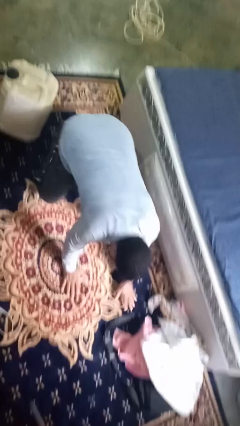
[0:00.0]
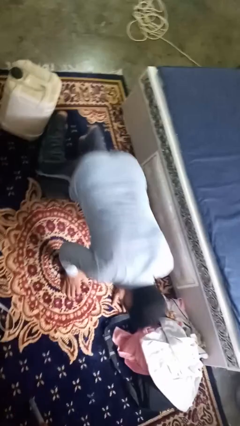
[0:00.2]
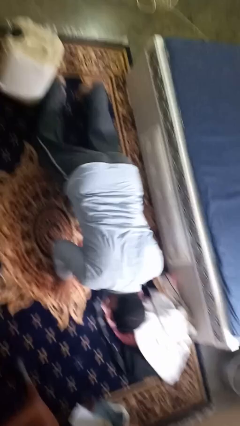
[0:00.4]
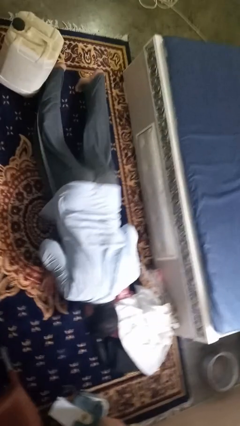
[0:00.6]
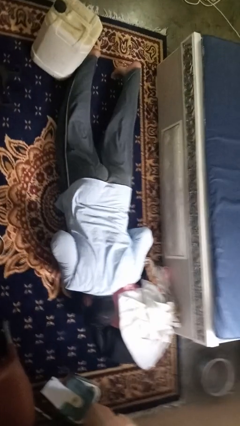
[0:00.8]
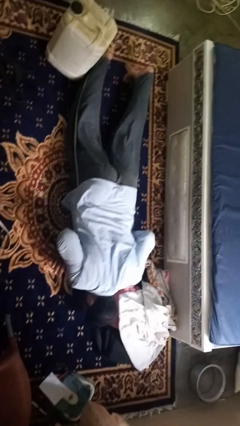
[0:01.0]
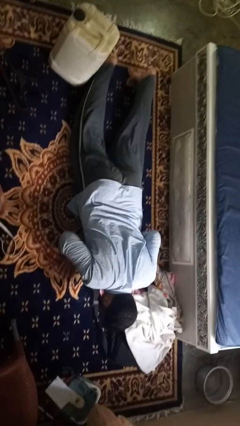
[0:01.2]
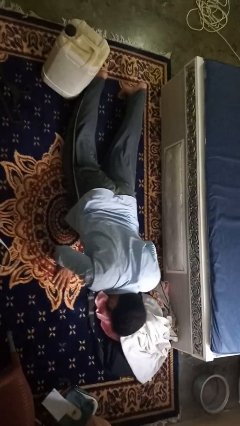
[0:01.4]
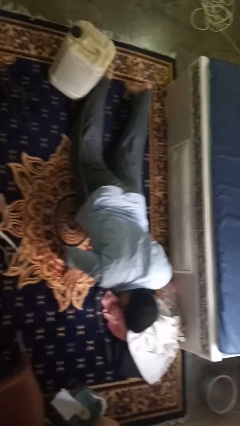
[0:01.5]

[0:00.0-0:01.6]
person lies down on floor

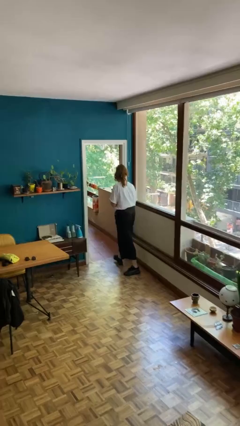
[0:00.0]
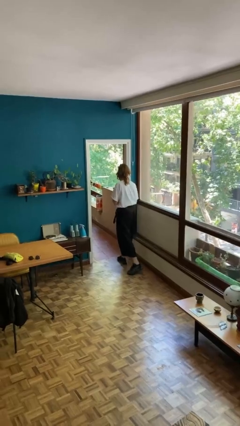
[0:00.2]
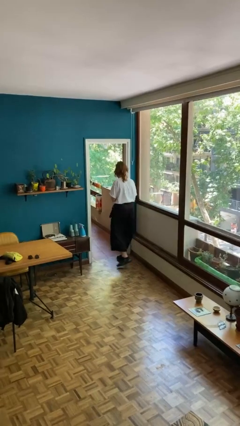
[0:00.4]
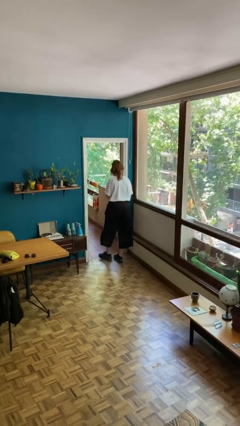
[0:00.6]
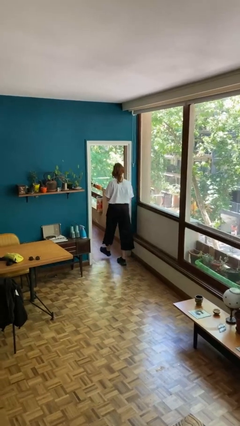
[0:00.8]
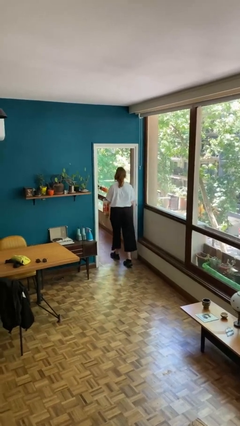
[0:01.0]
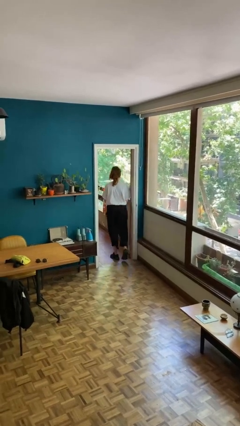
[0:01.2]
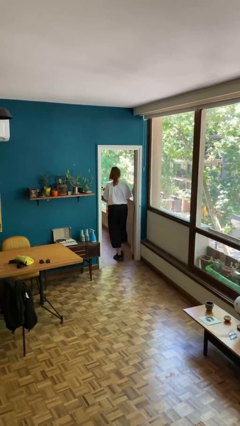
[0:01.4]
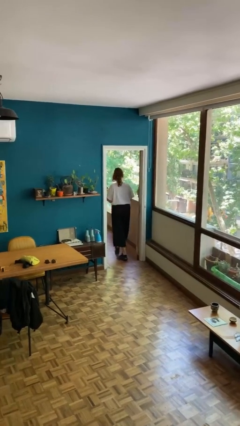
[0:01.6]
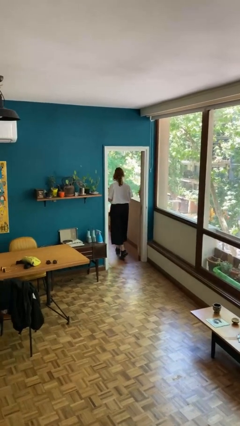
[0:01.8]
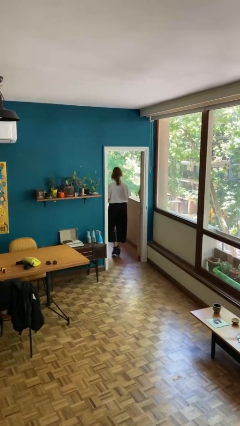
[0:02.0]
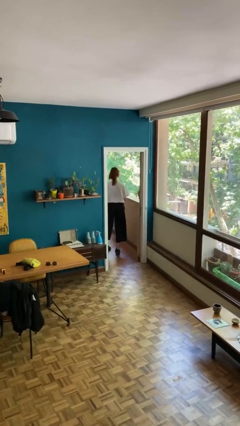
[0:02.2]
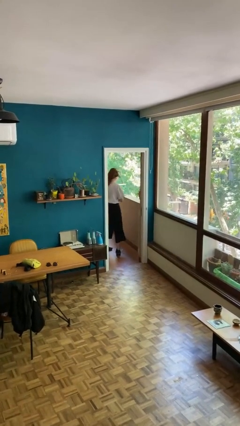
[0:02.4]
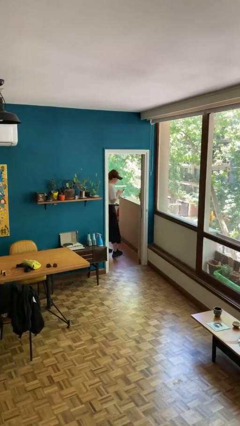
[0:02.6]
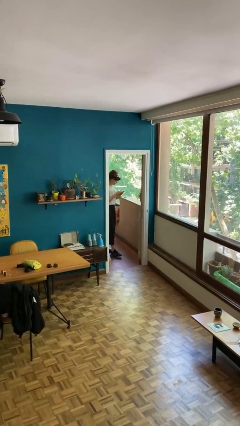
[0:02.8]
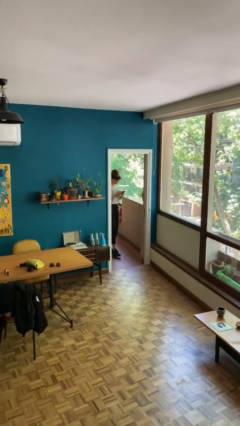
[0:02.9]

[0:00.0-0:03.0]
person exits scene through structure

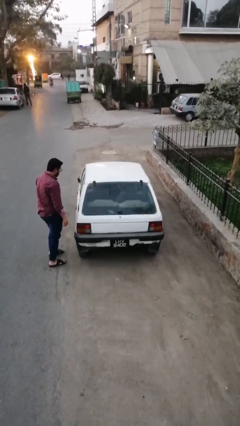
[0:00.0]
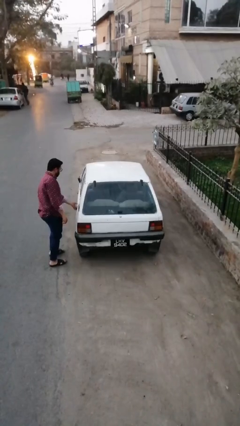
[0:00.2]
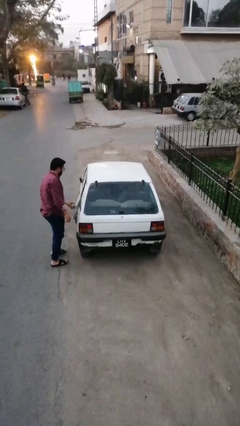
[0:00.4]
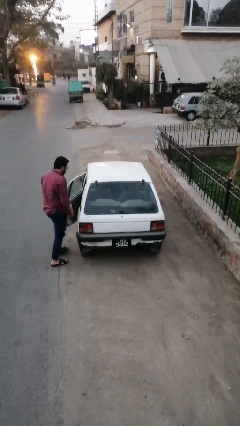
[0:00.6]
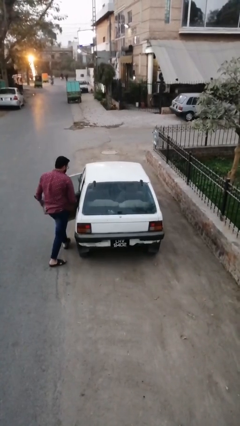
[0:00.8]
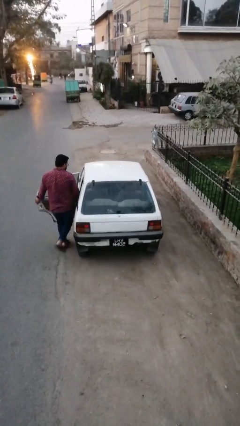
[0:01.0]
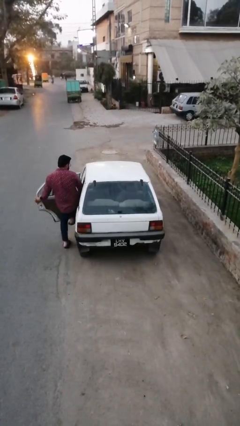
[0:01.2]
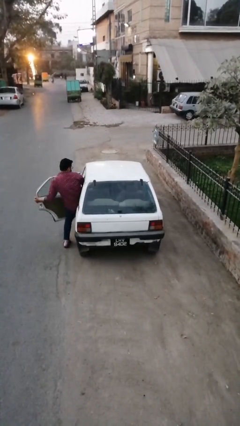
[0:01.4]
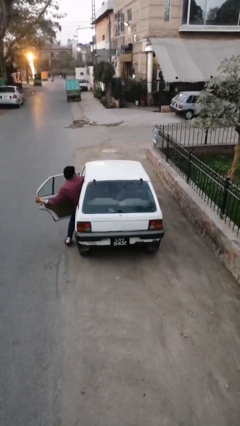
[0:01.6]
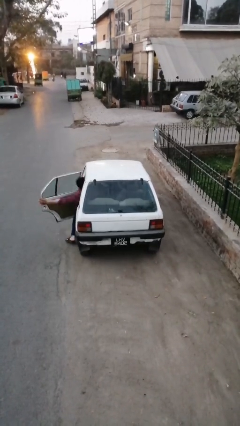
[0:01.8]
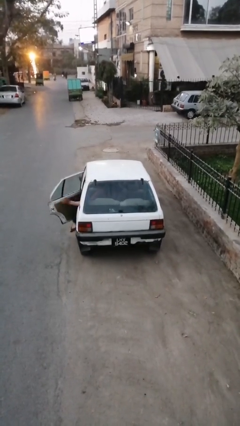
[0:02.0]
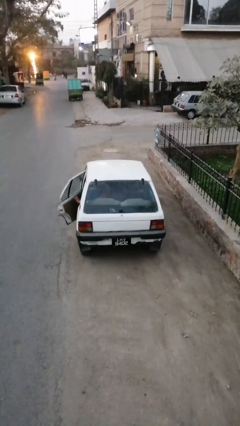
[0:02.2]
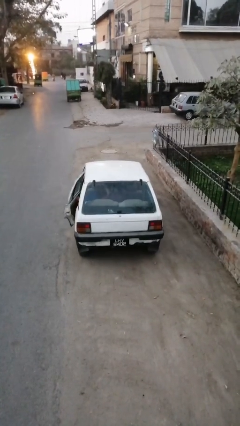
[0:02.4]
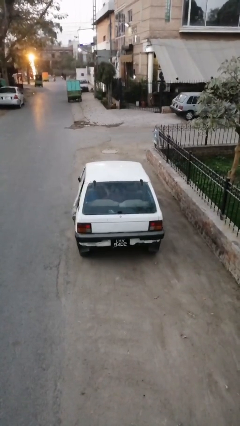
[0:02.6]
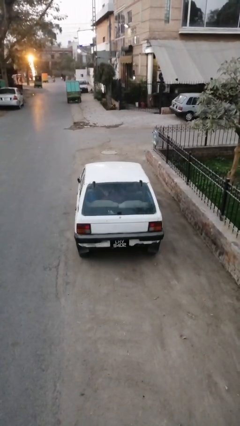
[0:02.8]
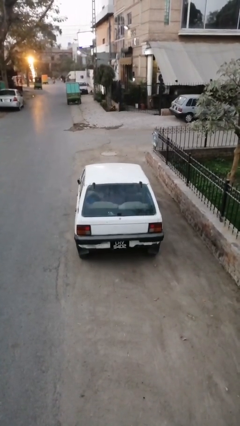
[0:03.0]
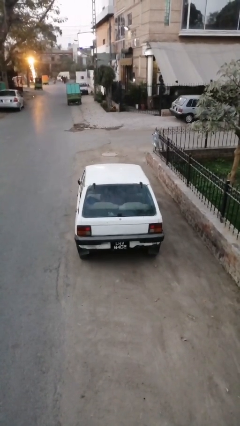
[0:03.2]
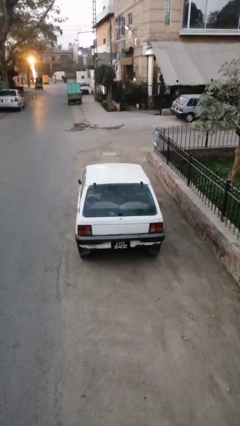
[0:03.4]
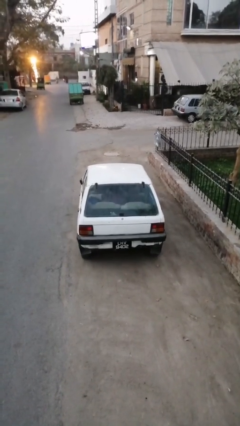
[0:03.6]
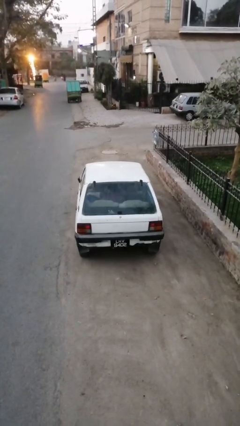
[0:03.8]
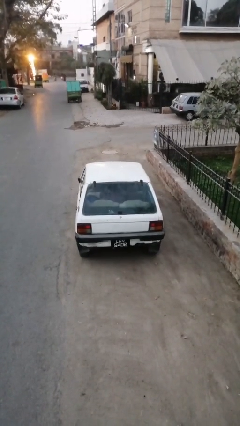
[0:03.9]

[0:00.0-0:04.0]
car picks up person

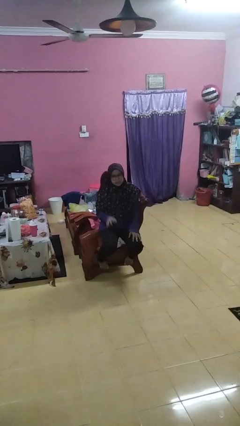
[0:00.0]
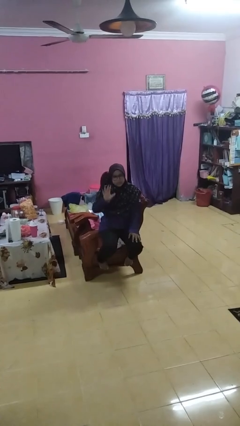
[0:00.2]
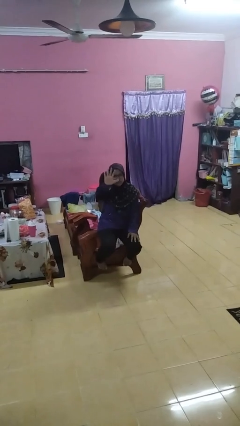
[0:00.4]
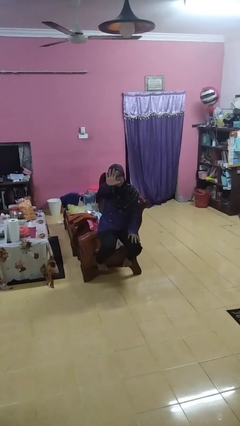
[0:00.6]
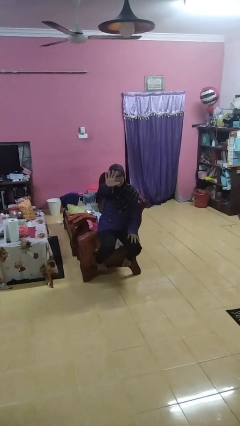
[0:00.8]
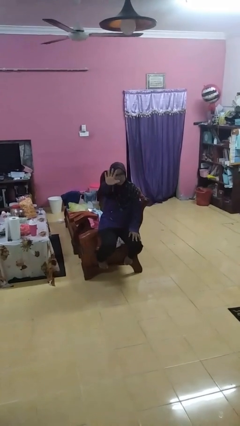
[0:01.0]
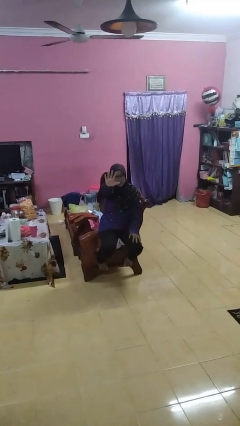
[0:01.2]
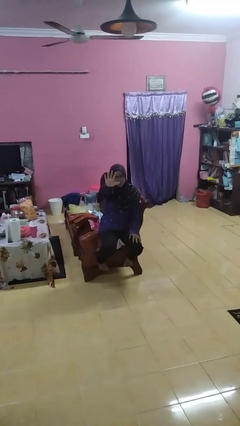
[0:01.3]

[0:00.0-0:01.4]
person gestures number five

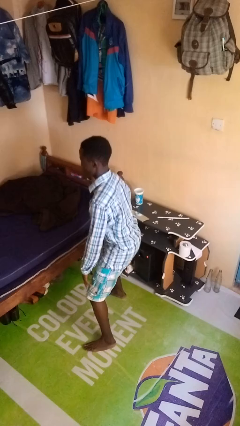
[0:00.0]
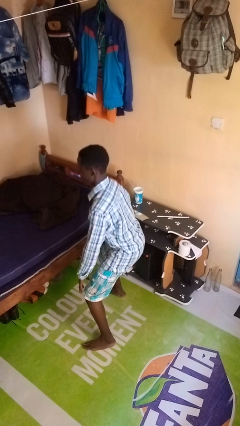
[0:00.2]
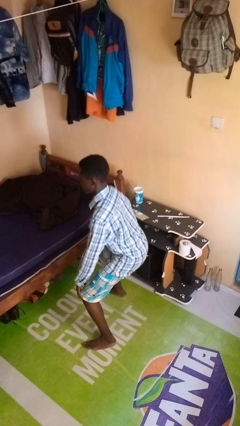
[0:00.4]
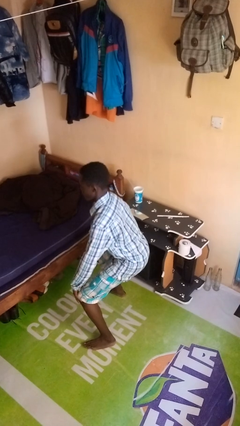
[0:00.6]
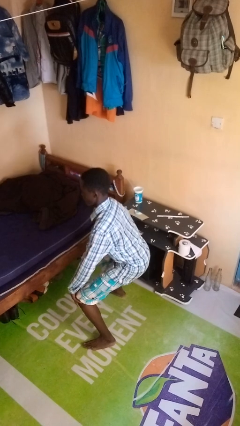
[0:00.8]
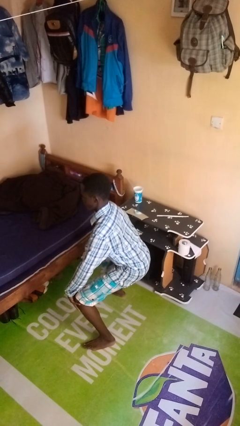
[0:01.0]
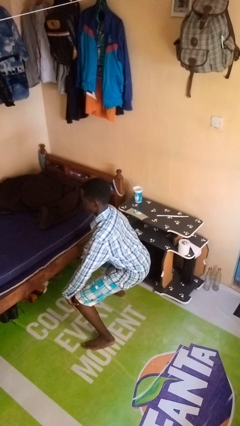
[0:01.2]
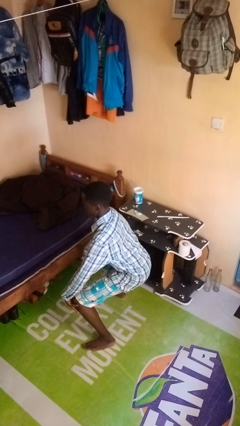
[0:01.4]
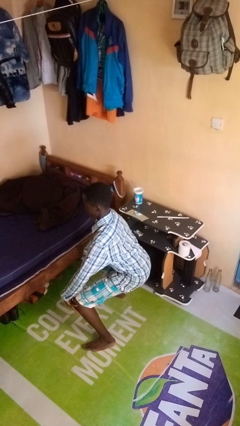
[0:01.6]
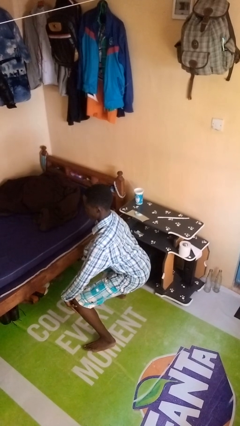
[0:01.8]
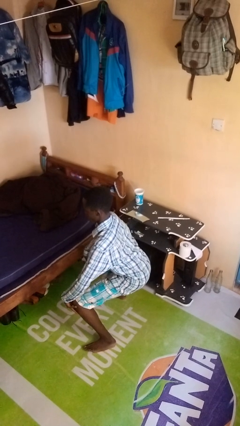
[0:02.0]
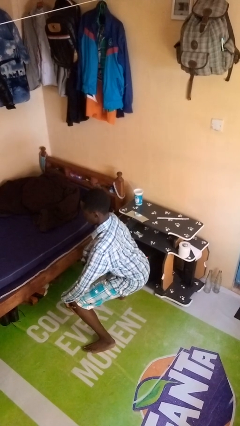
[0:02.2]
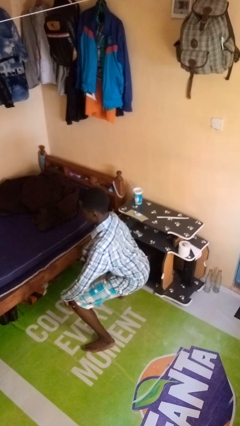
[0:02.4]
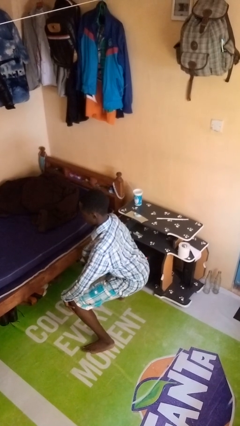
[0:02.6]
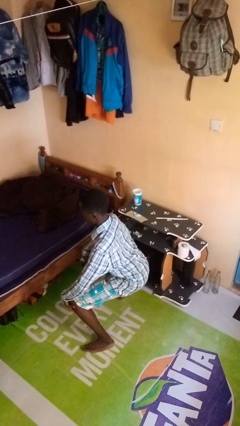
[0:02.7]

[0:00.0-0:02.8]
person squats

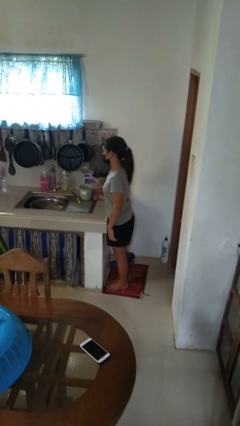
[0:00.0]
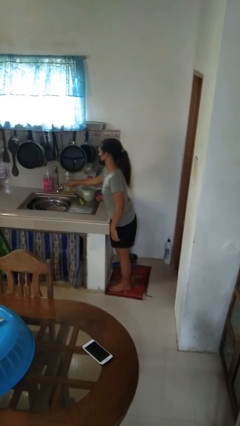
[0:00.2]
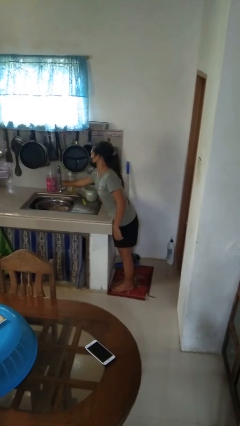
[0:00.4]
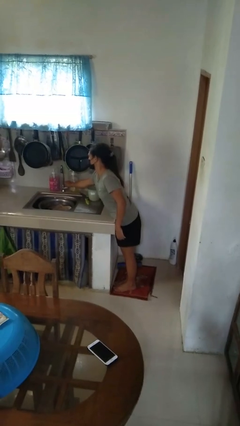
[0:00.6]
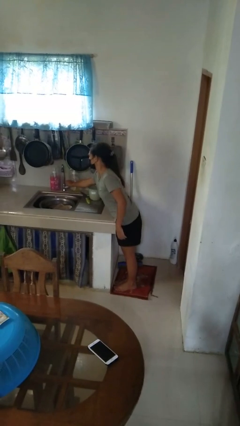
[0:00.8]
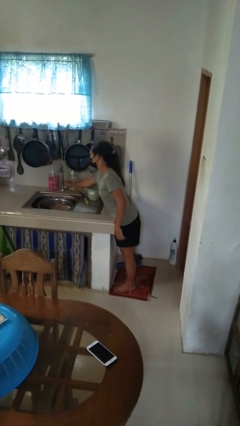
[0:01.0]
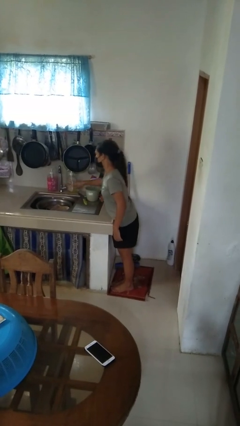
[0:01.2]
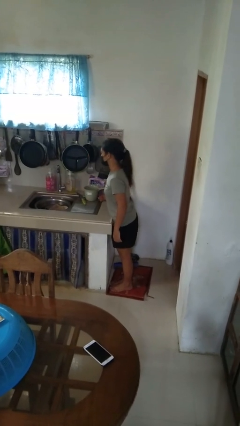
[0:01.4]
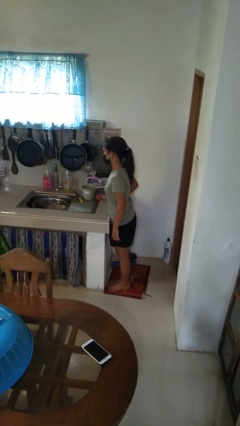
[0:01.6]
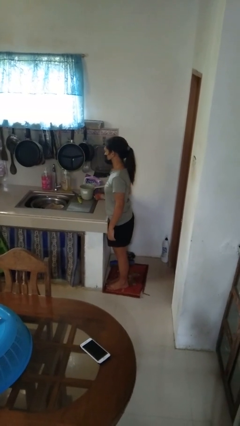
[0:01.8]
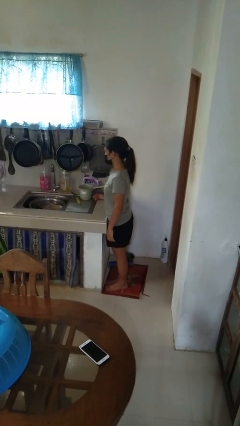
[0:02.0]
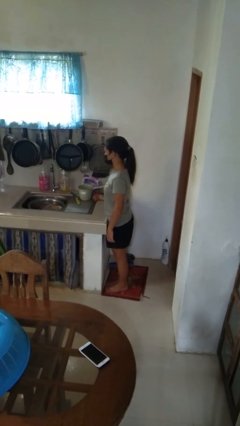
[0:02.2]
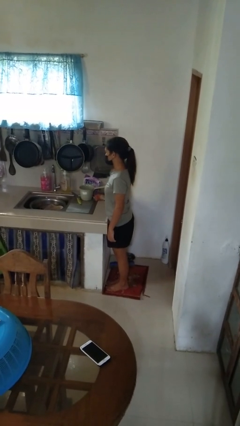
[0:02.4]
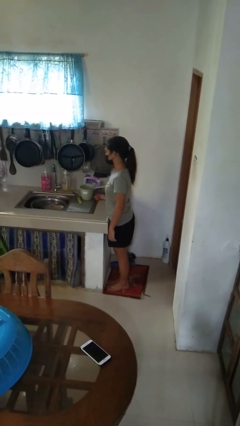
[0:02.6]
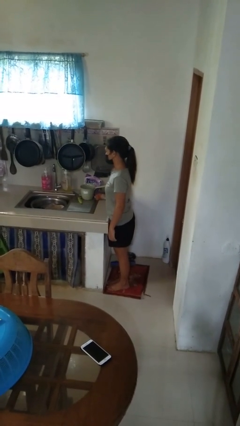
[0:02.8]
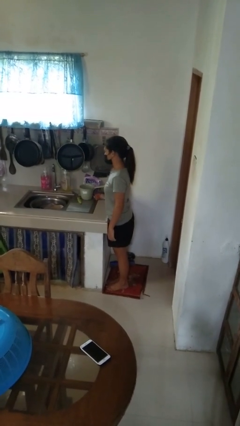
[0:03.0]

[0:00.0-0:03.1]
person turns on faucet

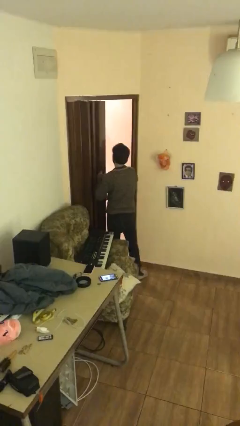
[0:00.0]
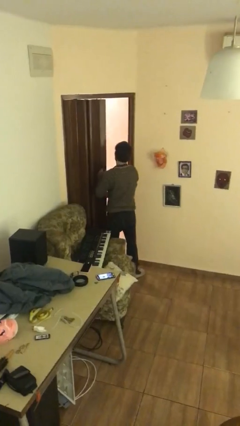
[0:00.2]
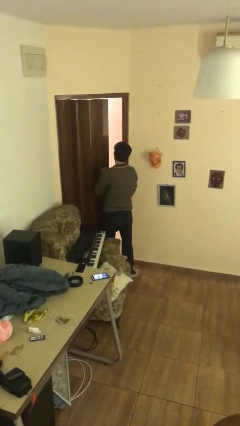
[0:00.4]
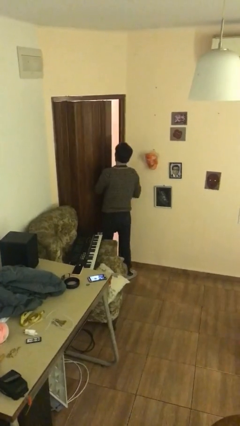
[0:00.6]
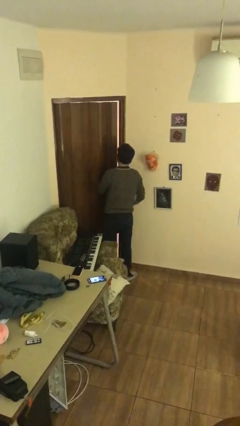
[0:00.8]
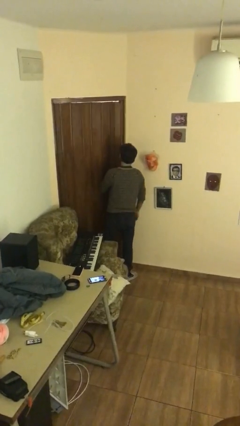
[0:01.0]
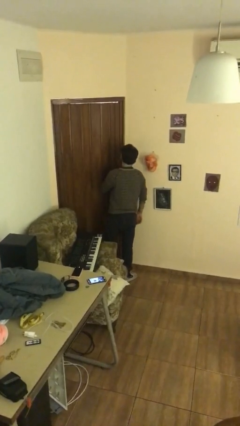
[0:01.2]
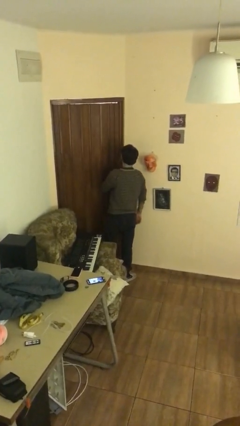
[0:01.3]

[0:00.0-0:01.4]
person closes sliding door
